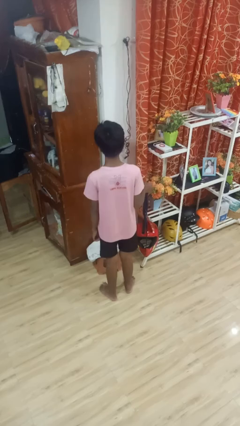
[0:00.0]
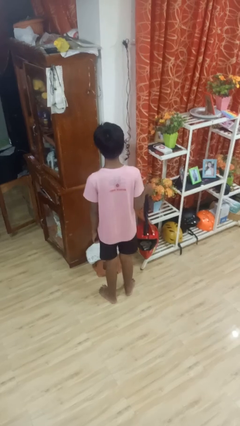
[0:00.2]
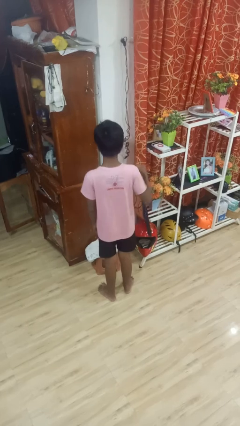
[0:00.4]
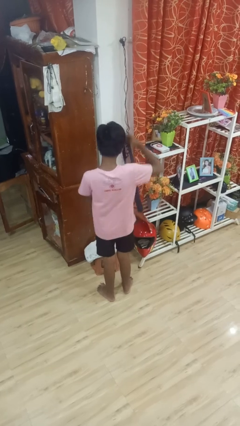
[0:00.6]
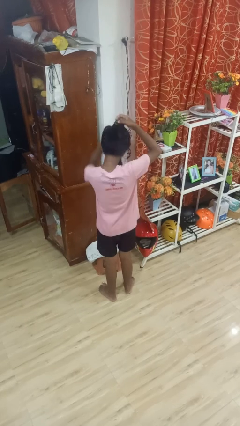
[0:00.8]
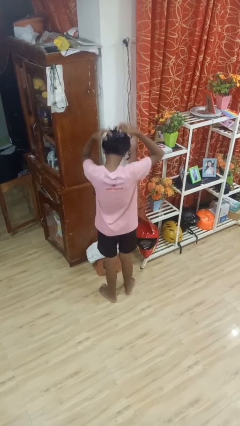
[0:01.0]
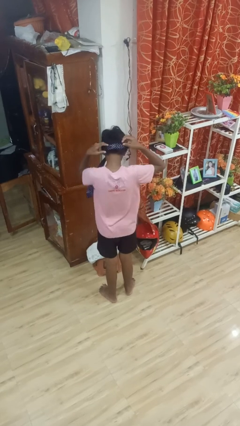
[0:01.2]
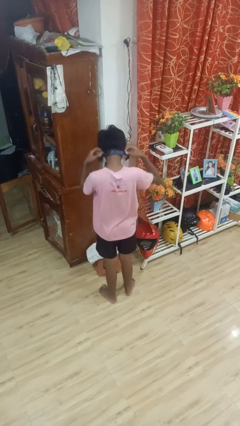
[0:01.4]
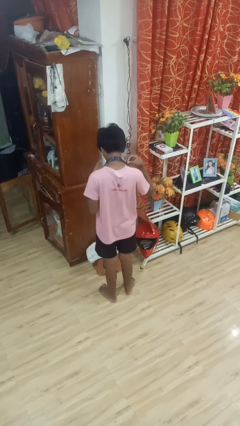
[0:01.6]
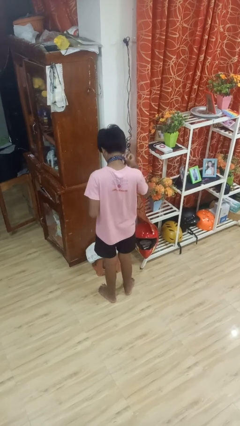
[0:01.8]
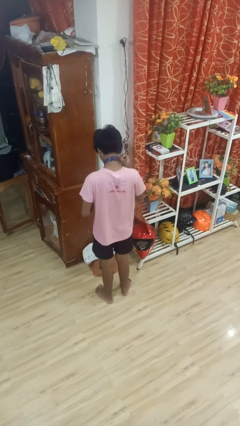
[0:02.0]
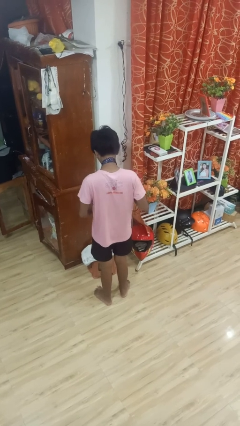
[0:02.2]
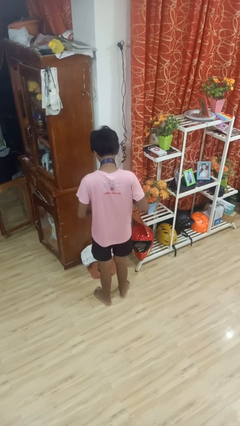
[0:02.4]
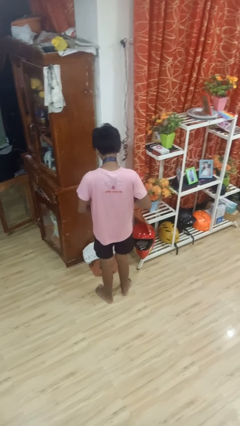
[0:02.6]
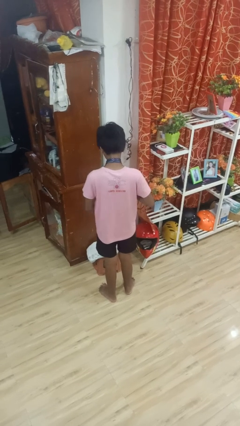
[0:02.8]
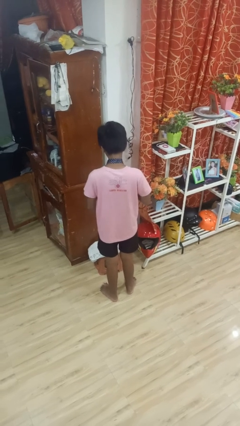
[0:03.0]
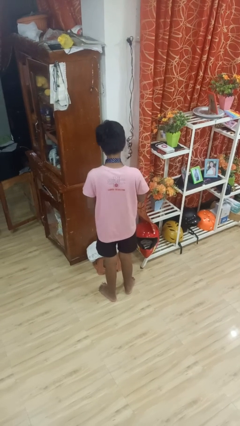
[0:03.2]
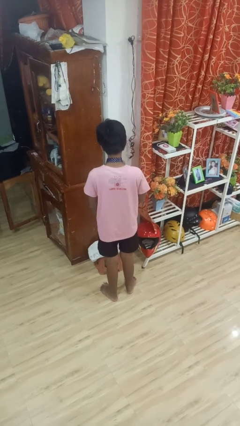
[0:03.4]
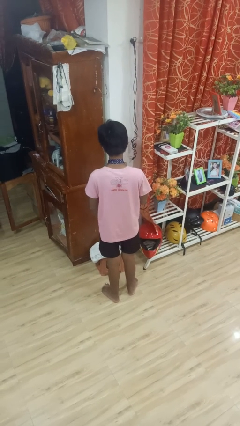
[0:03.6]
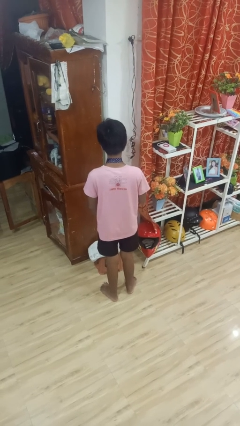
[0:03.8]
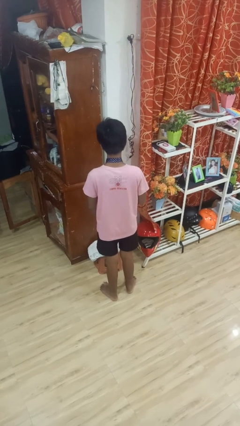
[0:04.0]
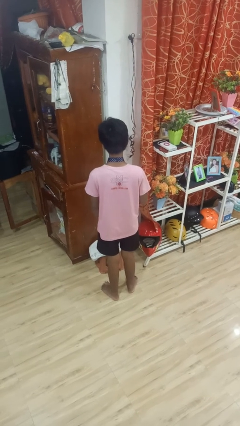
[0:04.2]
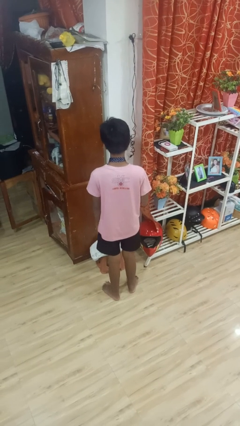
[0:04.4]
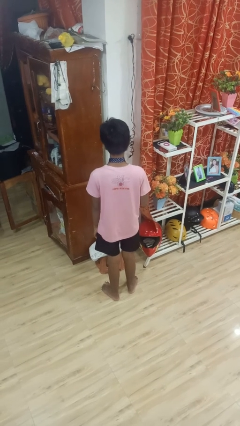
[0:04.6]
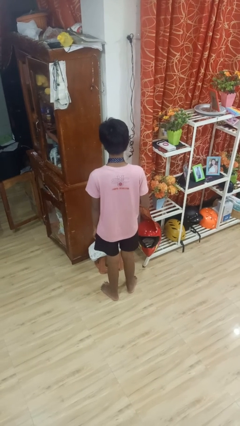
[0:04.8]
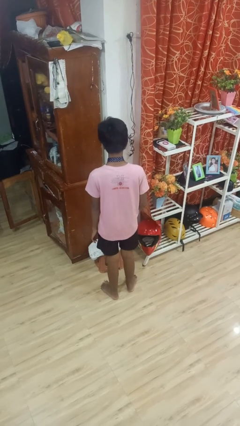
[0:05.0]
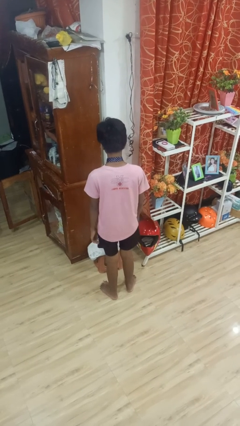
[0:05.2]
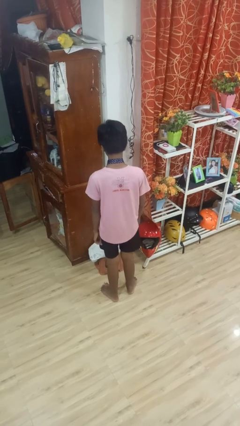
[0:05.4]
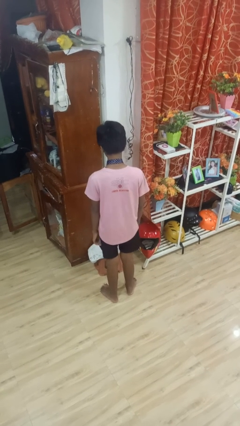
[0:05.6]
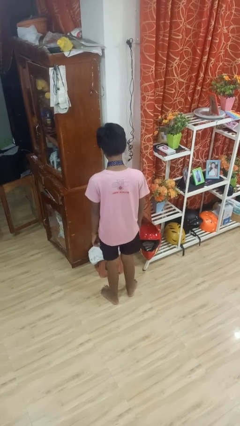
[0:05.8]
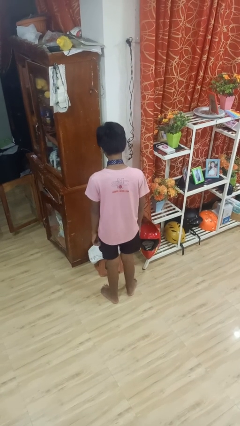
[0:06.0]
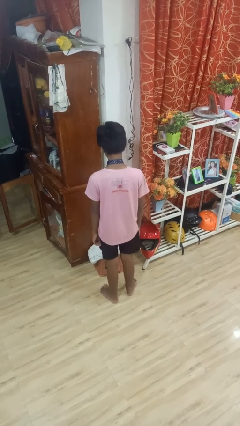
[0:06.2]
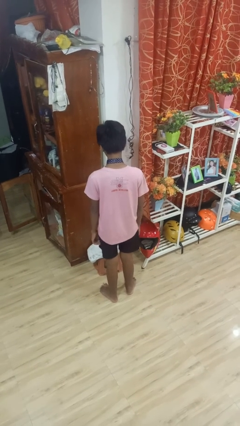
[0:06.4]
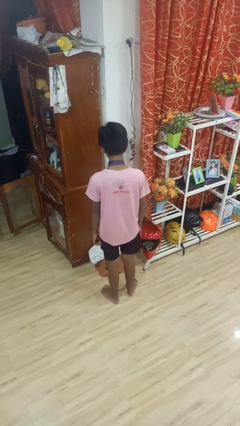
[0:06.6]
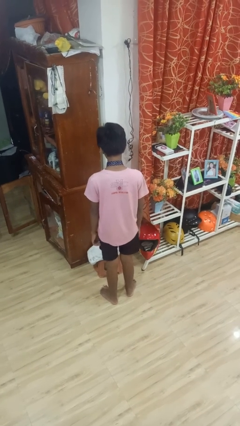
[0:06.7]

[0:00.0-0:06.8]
person puts on necktie

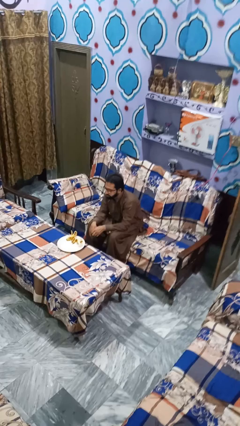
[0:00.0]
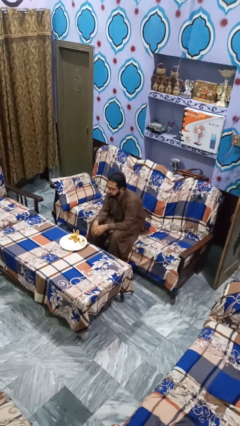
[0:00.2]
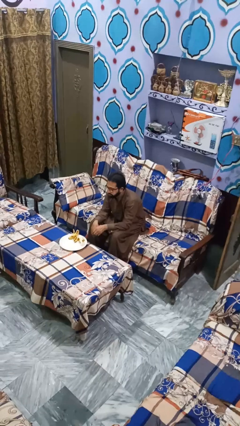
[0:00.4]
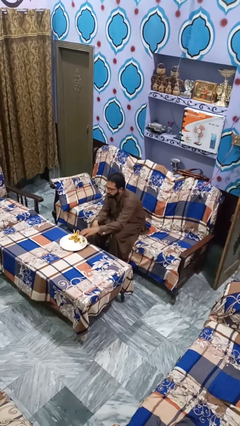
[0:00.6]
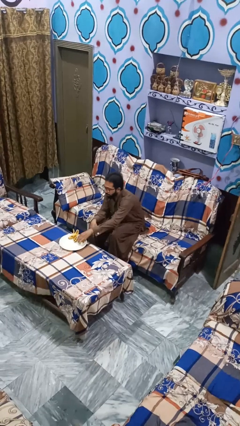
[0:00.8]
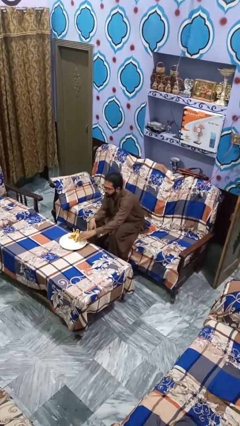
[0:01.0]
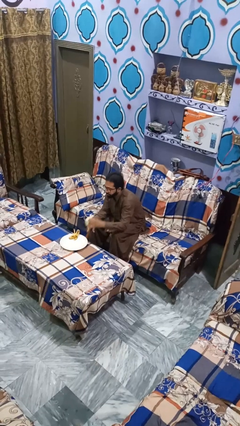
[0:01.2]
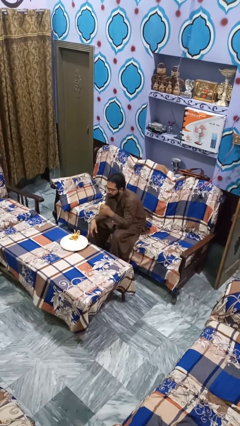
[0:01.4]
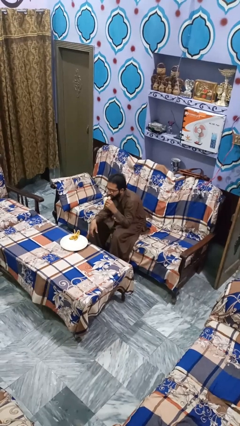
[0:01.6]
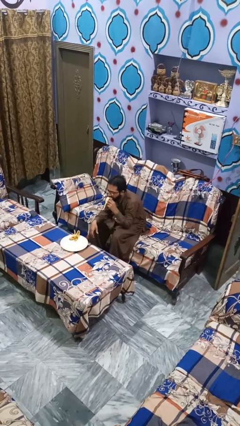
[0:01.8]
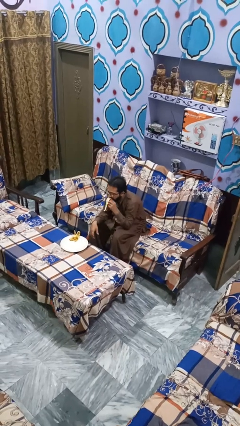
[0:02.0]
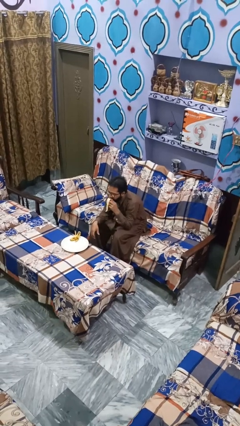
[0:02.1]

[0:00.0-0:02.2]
person eats banana

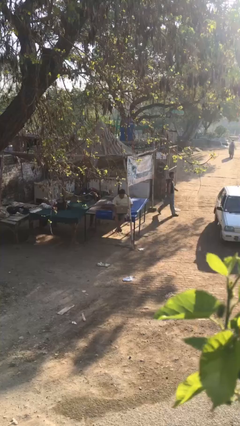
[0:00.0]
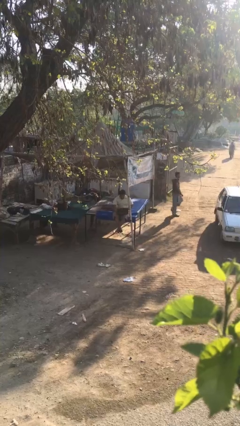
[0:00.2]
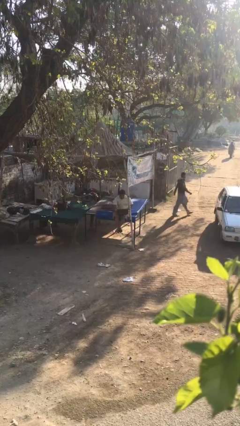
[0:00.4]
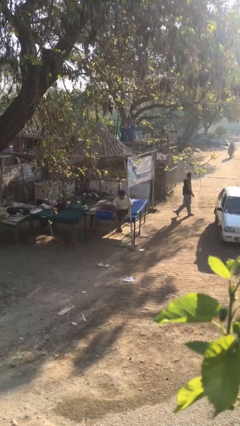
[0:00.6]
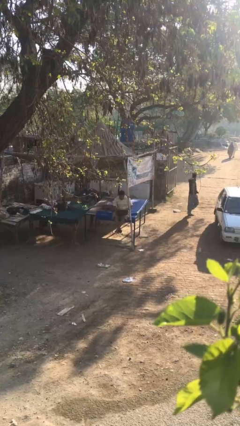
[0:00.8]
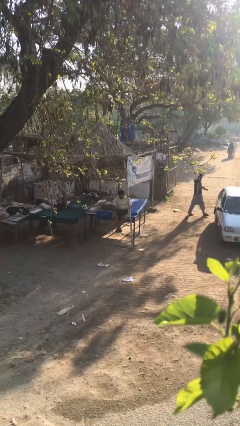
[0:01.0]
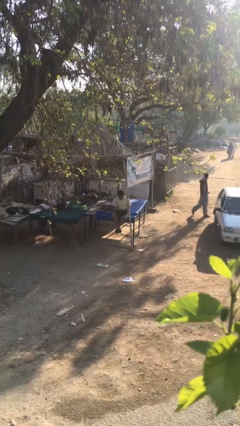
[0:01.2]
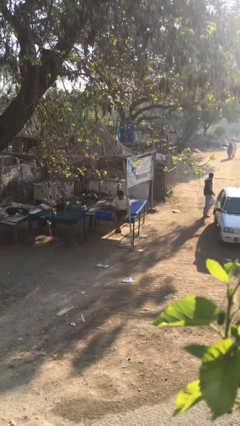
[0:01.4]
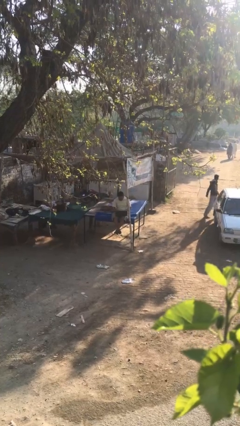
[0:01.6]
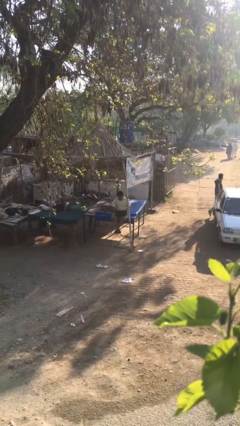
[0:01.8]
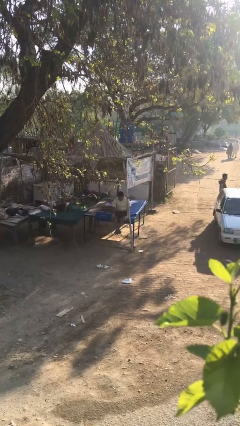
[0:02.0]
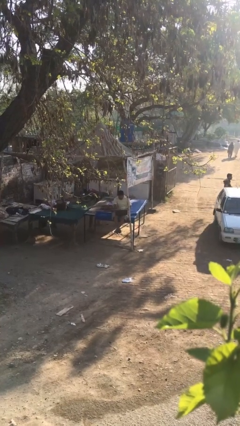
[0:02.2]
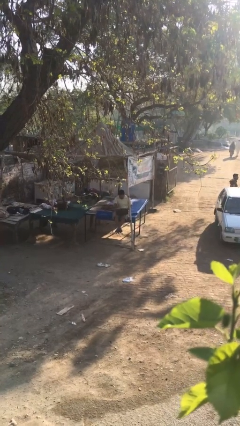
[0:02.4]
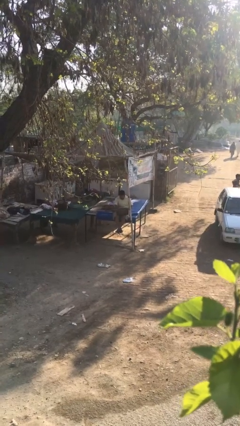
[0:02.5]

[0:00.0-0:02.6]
person interacts with laptop

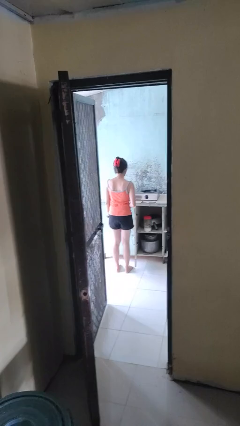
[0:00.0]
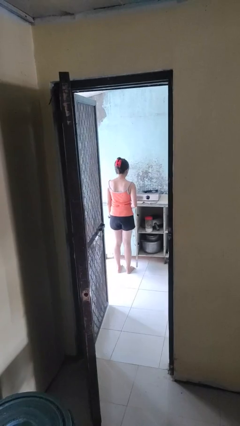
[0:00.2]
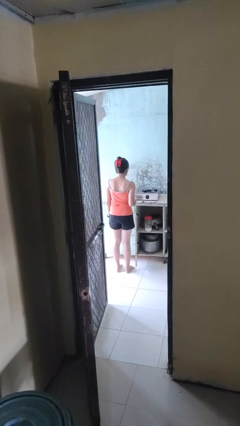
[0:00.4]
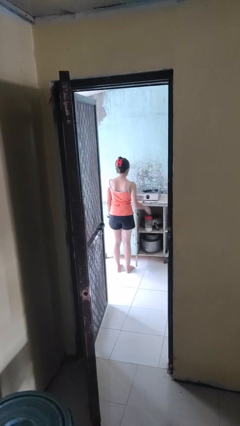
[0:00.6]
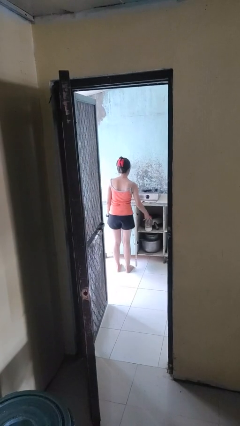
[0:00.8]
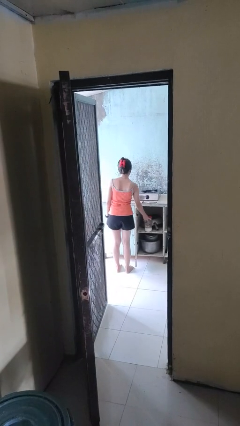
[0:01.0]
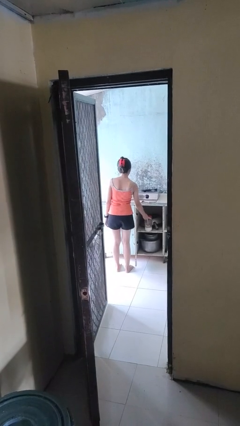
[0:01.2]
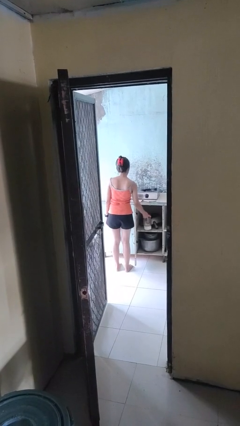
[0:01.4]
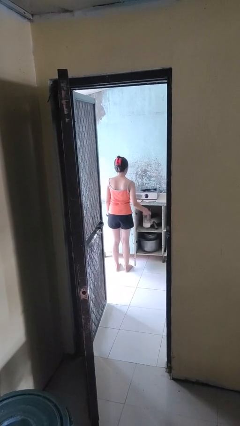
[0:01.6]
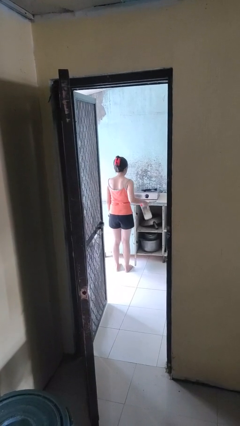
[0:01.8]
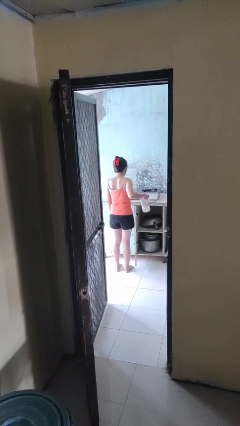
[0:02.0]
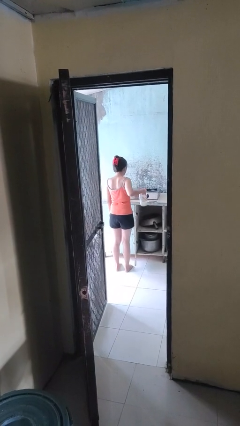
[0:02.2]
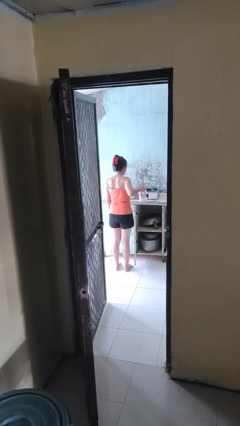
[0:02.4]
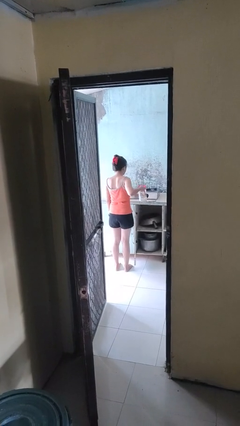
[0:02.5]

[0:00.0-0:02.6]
person picks up object from cabinet

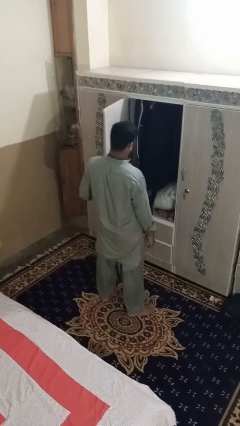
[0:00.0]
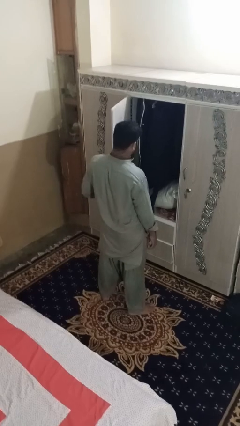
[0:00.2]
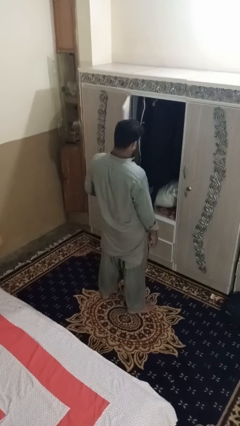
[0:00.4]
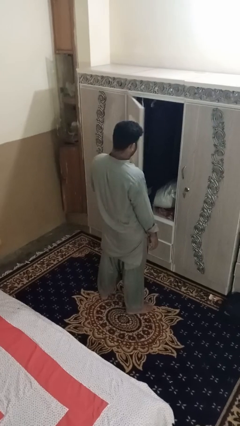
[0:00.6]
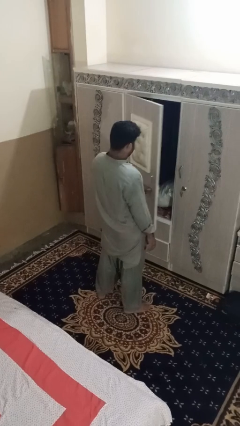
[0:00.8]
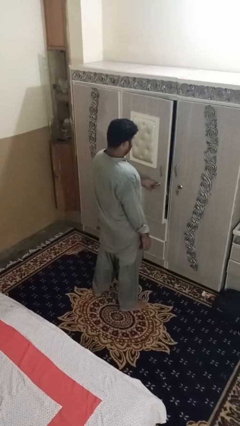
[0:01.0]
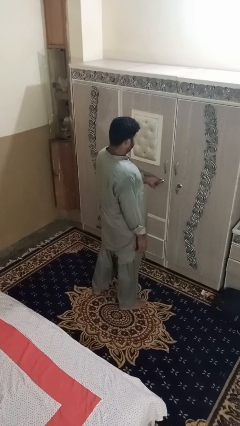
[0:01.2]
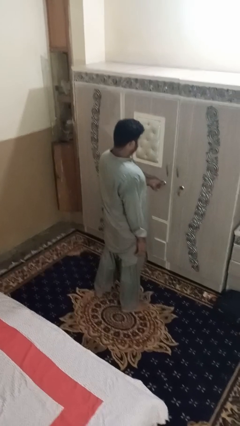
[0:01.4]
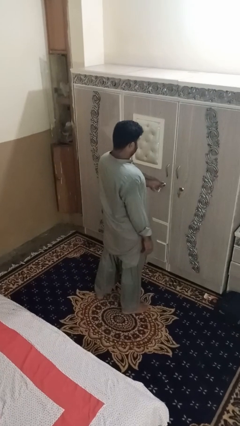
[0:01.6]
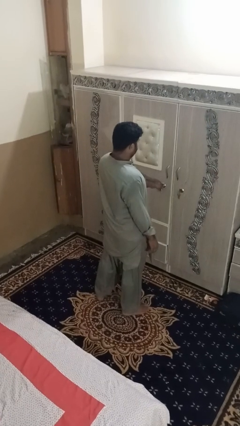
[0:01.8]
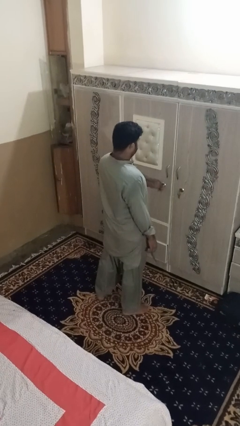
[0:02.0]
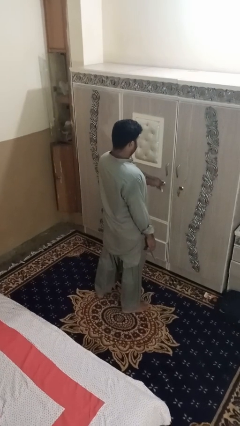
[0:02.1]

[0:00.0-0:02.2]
person closes dresser drawer

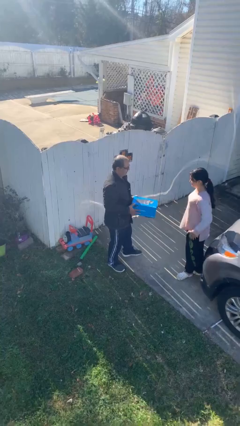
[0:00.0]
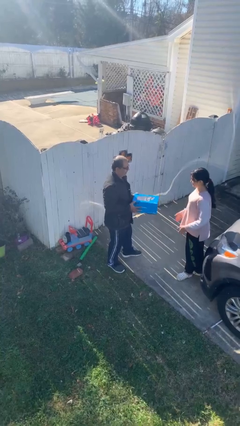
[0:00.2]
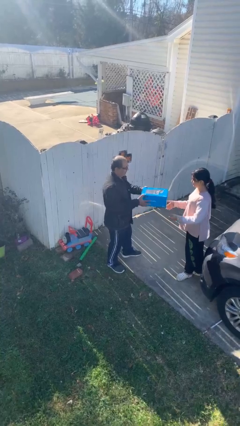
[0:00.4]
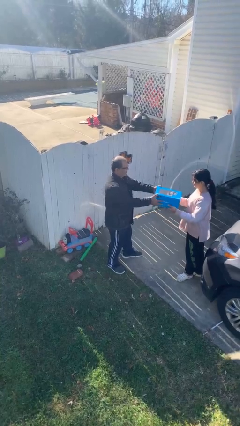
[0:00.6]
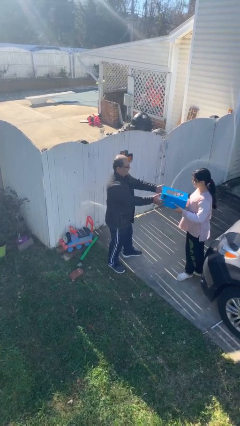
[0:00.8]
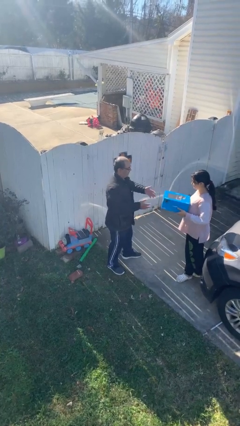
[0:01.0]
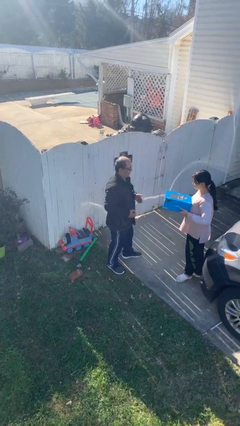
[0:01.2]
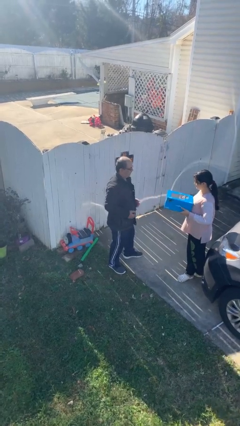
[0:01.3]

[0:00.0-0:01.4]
person transfers object to person
